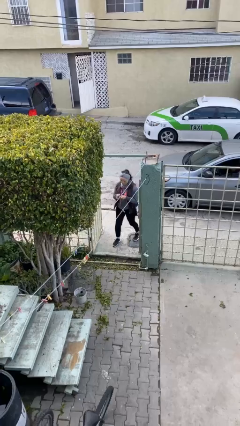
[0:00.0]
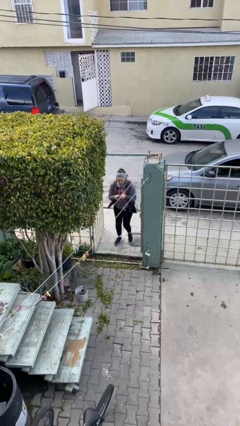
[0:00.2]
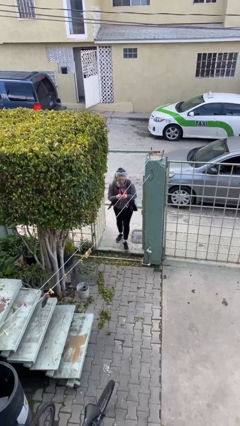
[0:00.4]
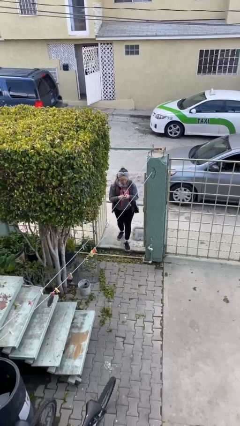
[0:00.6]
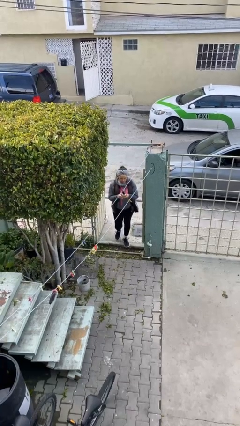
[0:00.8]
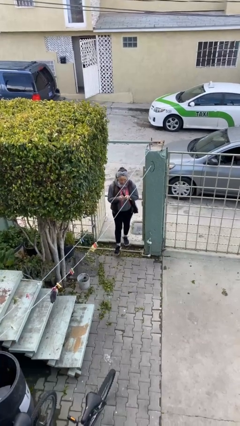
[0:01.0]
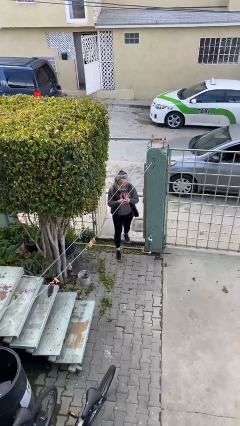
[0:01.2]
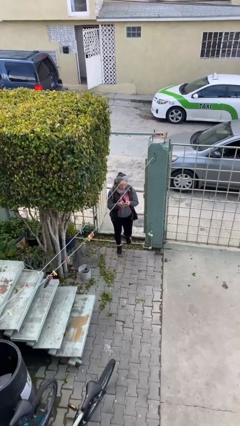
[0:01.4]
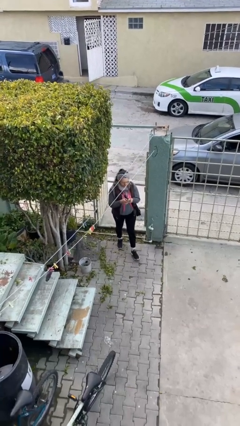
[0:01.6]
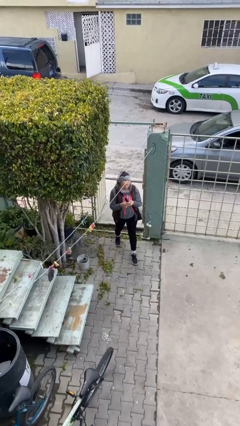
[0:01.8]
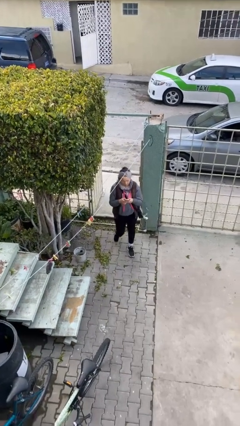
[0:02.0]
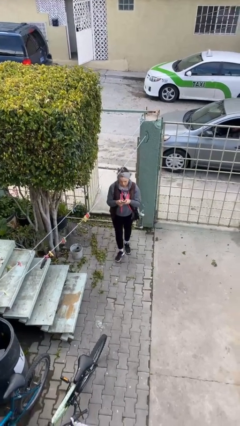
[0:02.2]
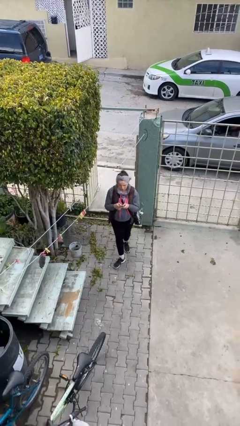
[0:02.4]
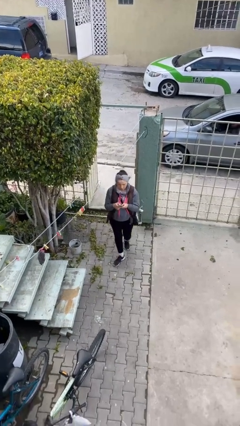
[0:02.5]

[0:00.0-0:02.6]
person enters scene through structure

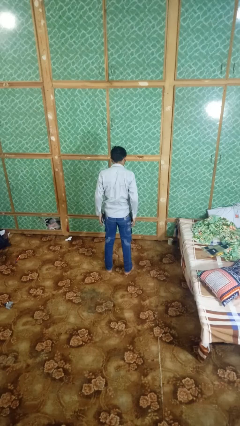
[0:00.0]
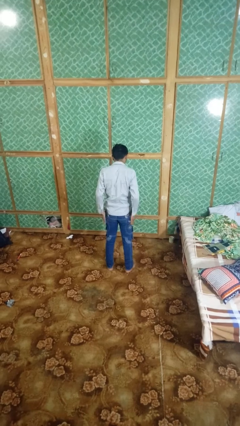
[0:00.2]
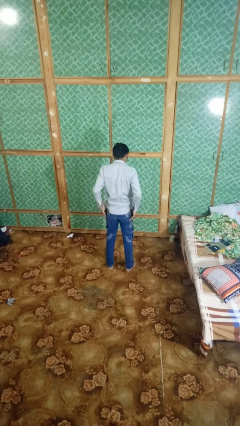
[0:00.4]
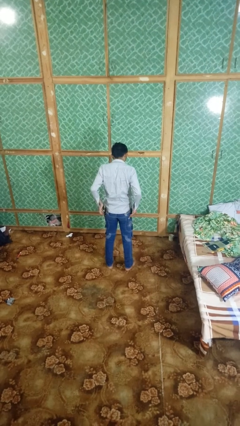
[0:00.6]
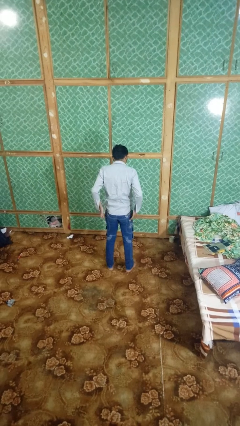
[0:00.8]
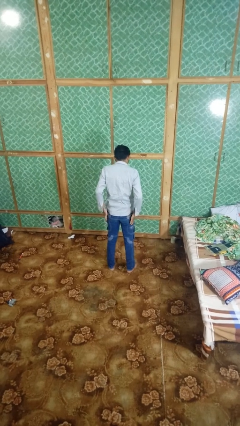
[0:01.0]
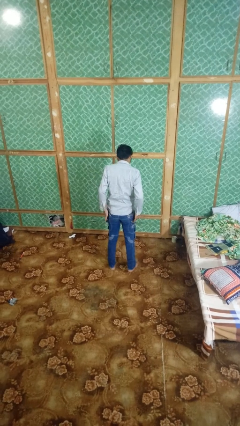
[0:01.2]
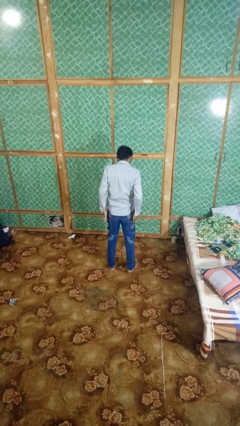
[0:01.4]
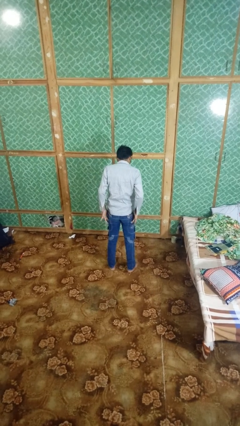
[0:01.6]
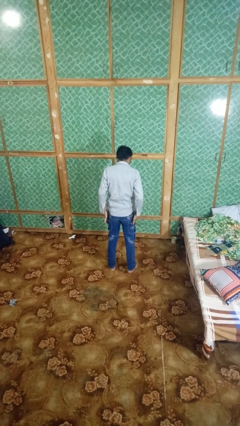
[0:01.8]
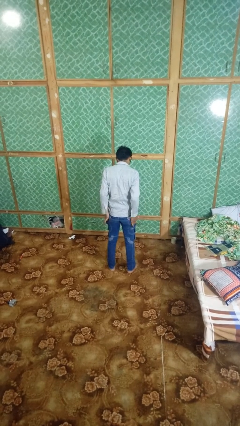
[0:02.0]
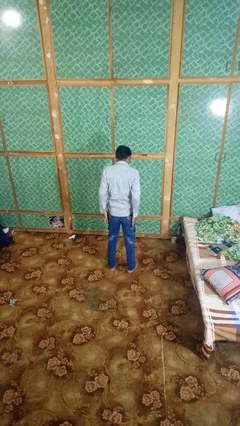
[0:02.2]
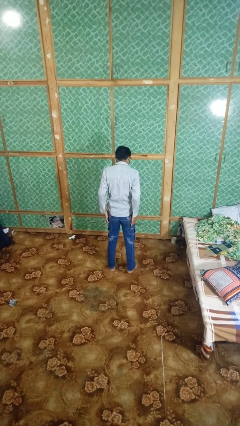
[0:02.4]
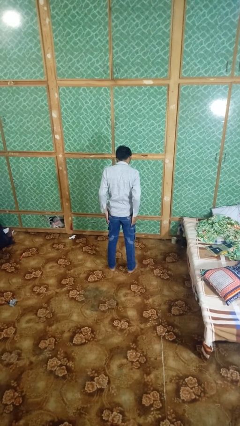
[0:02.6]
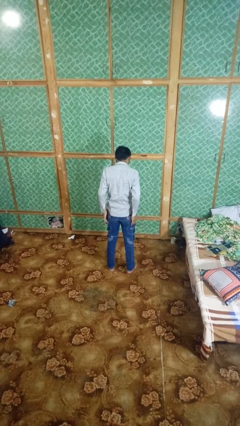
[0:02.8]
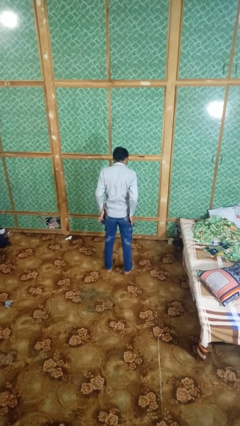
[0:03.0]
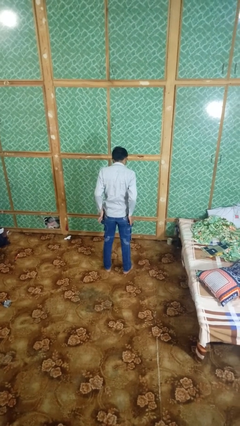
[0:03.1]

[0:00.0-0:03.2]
person puts hands in back pockets

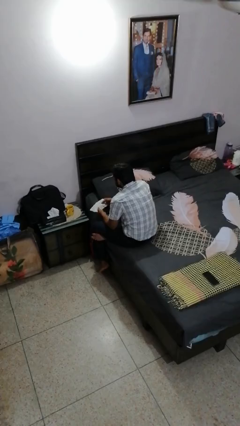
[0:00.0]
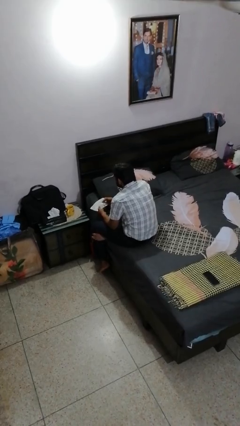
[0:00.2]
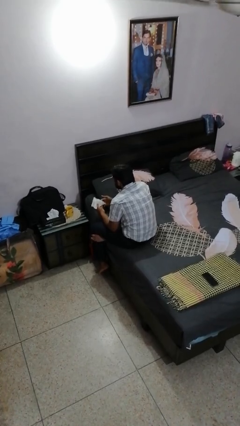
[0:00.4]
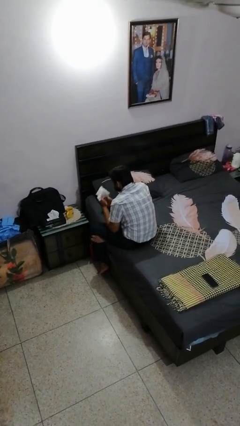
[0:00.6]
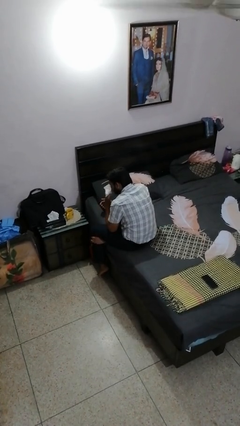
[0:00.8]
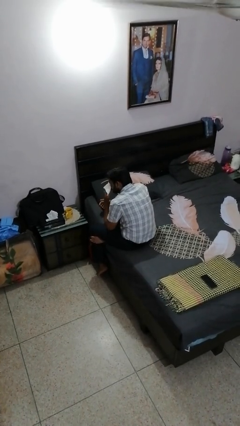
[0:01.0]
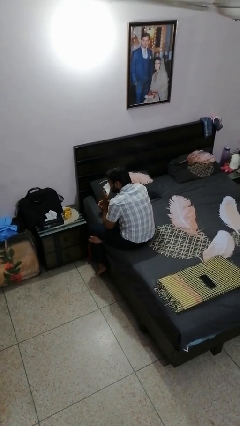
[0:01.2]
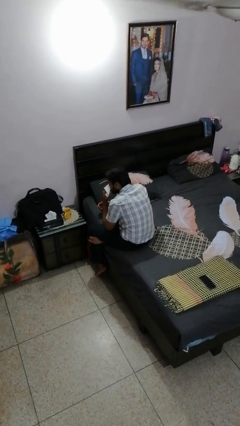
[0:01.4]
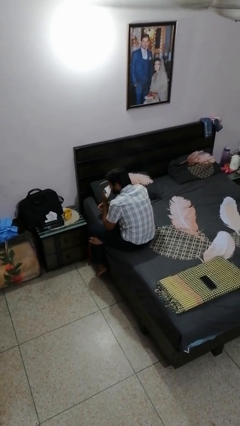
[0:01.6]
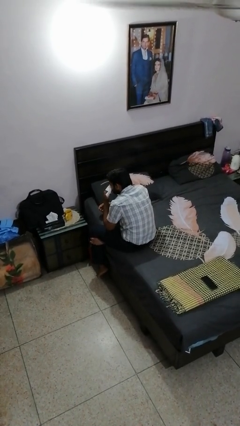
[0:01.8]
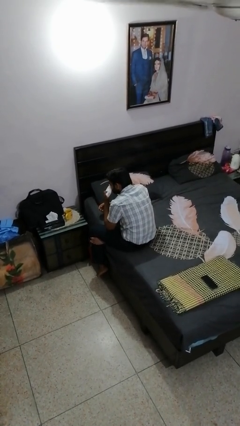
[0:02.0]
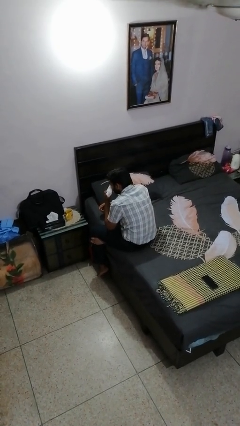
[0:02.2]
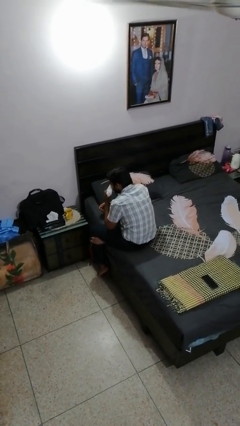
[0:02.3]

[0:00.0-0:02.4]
person blows nose

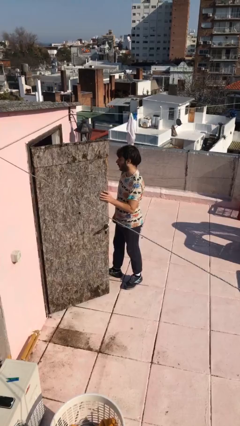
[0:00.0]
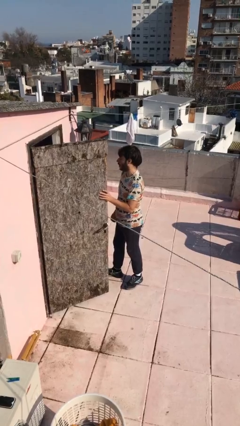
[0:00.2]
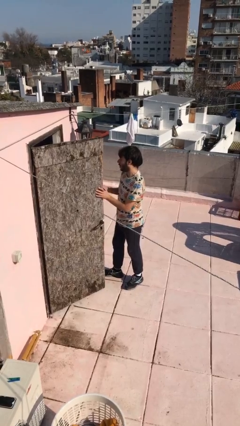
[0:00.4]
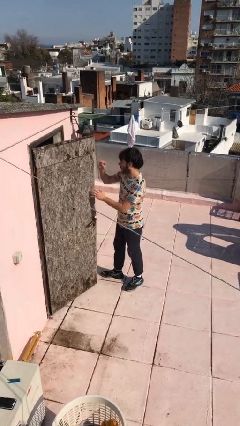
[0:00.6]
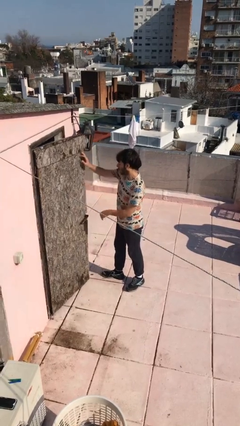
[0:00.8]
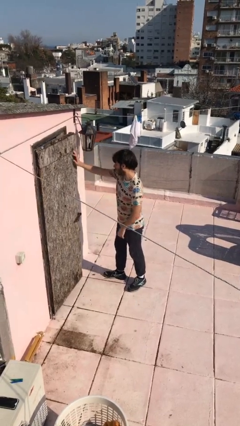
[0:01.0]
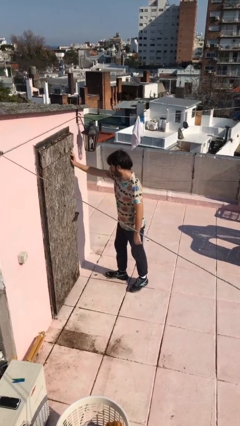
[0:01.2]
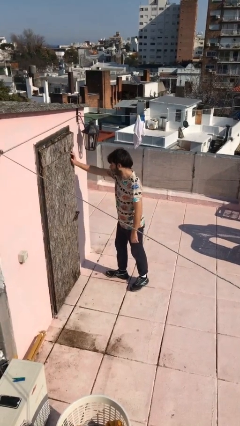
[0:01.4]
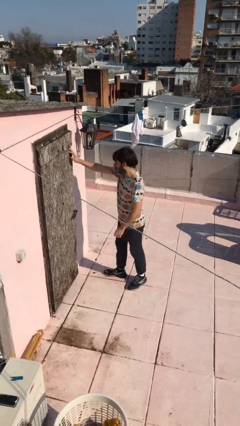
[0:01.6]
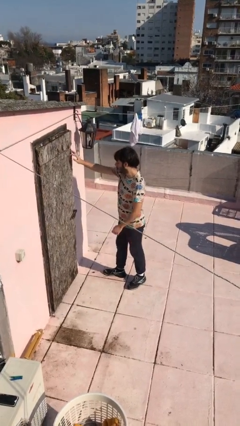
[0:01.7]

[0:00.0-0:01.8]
person closes facility door

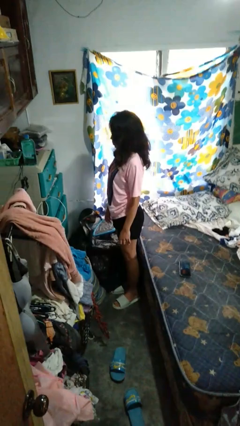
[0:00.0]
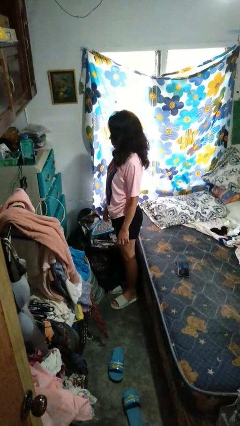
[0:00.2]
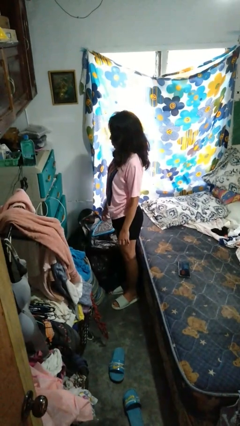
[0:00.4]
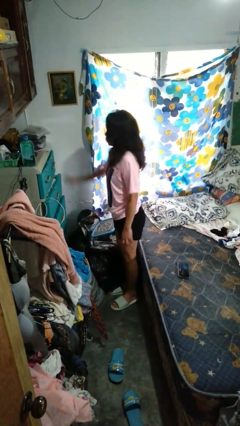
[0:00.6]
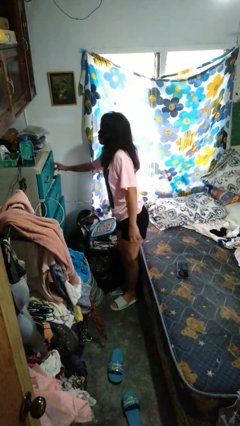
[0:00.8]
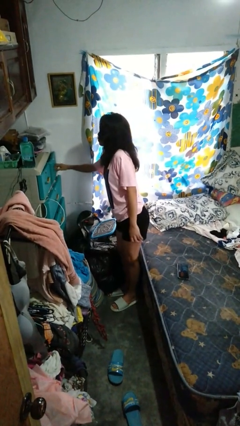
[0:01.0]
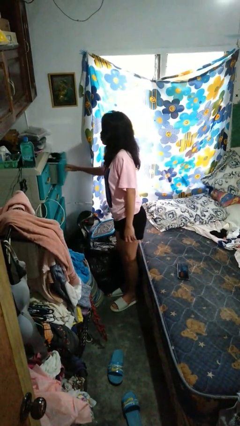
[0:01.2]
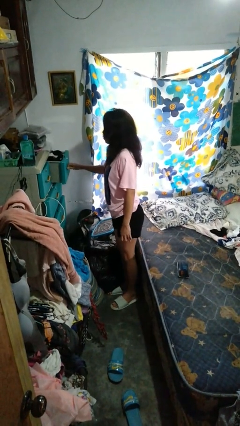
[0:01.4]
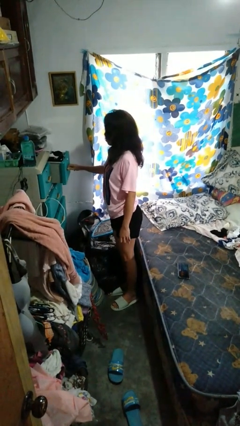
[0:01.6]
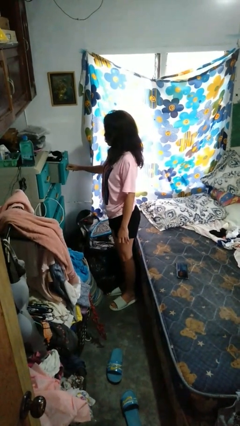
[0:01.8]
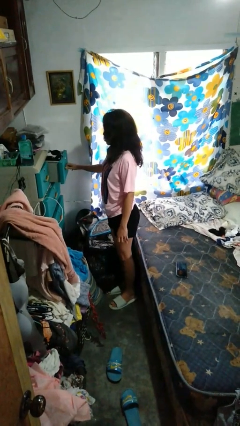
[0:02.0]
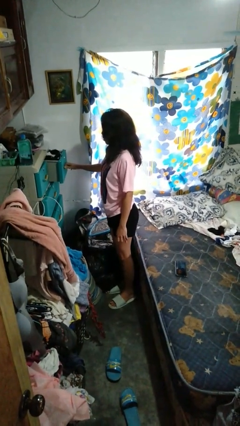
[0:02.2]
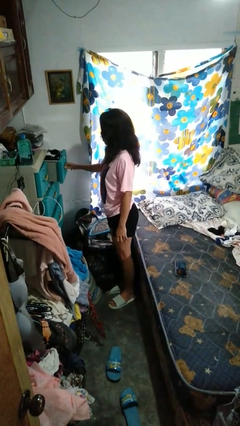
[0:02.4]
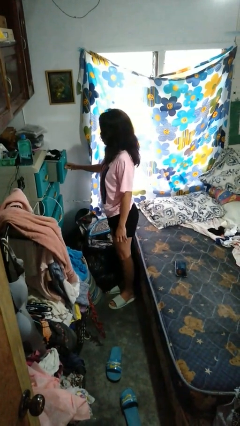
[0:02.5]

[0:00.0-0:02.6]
person opens dresser drawer

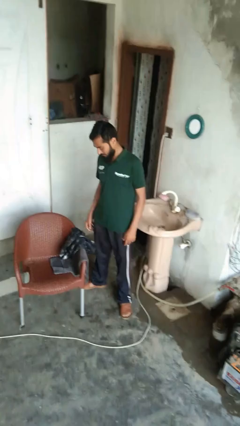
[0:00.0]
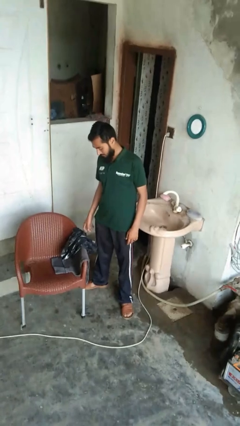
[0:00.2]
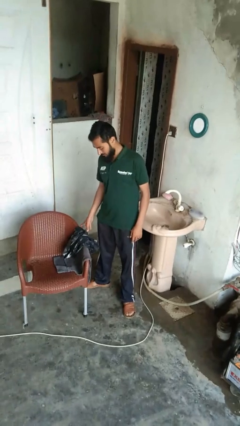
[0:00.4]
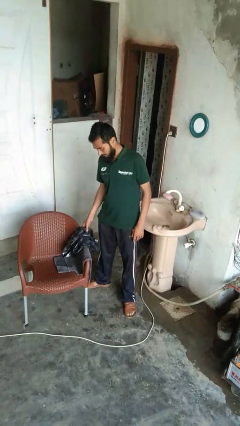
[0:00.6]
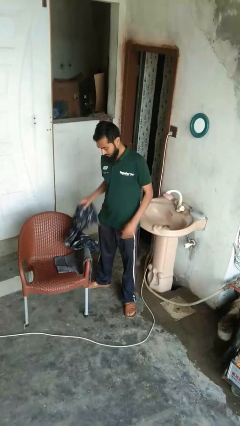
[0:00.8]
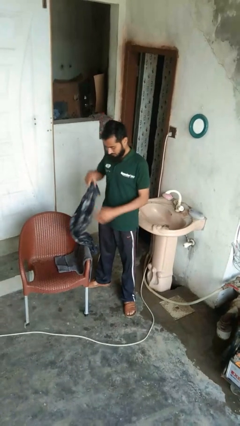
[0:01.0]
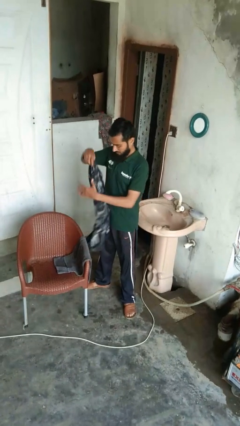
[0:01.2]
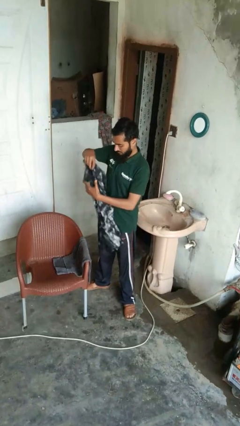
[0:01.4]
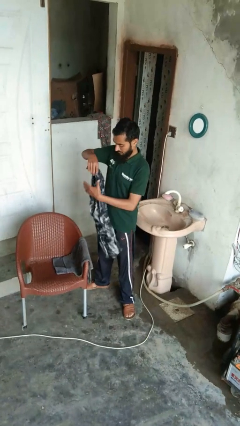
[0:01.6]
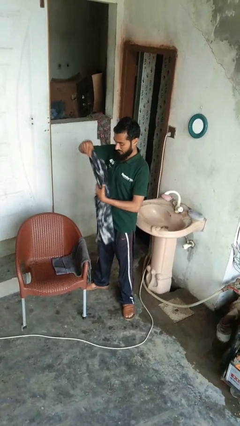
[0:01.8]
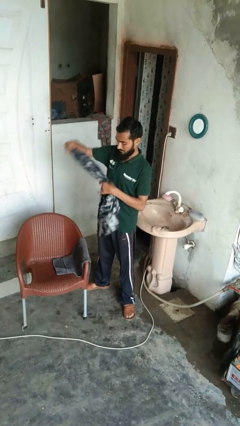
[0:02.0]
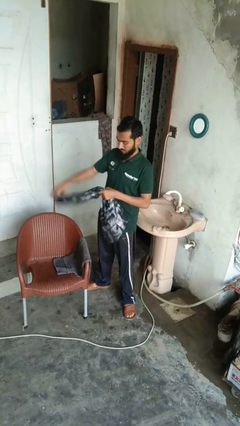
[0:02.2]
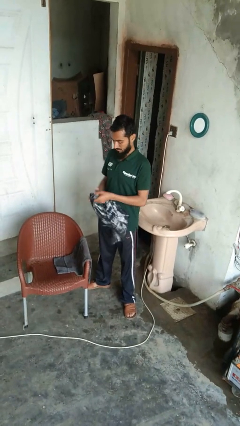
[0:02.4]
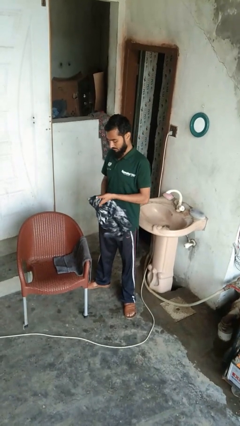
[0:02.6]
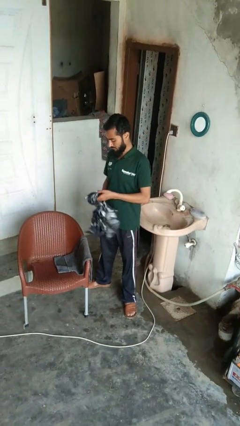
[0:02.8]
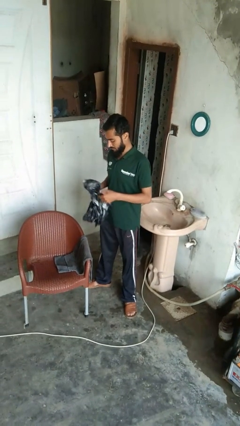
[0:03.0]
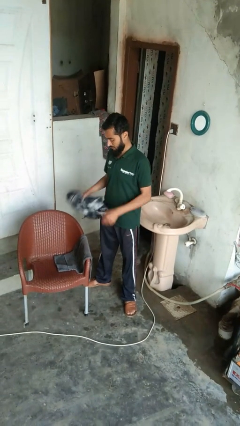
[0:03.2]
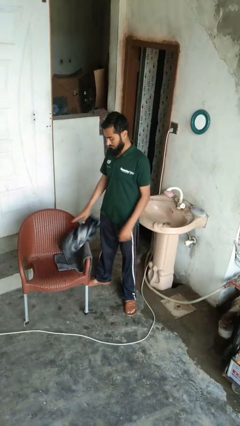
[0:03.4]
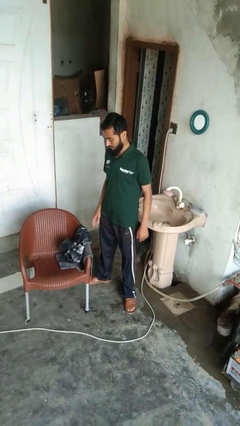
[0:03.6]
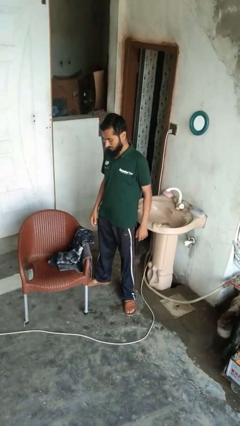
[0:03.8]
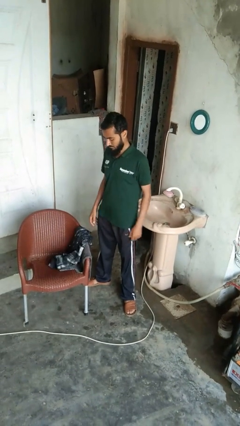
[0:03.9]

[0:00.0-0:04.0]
person folds shirt

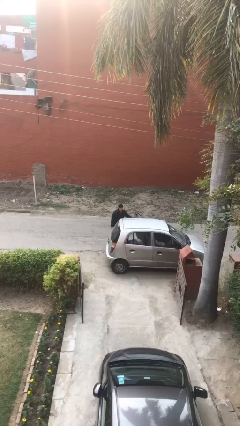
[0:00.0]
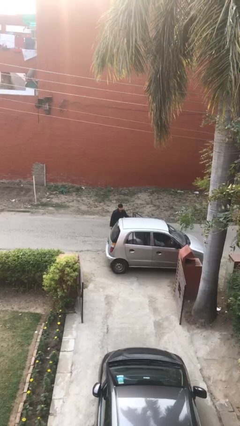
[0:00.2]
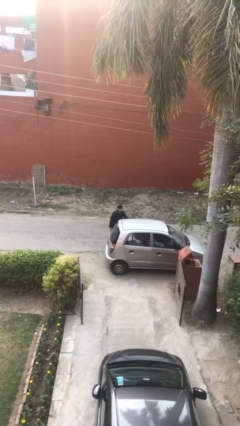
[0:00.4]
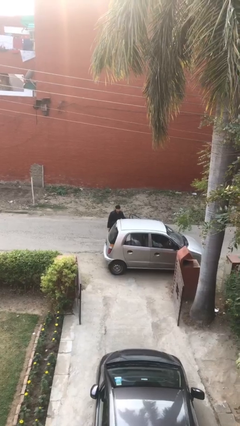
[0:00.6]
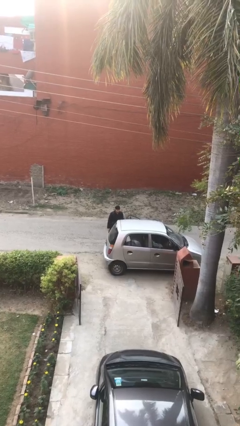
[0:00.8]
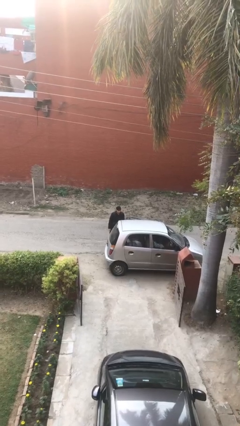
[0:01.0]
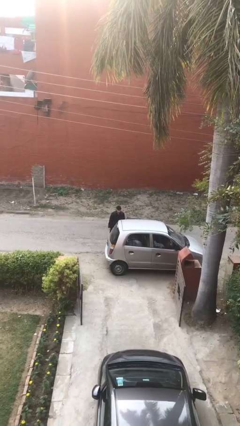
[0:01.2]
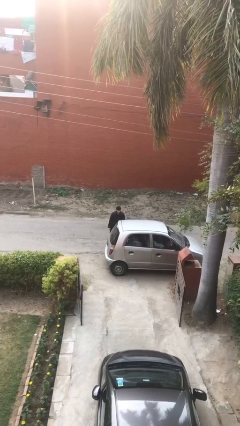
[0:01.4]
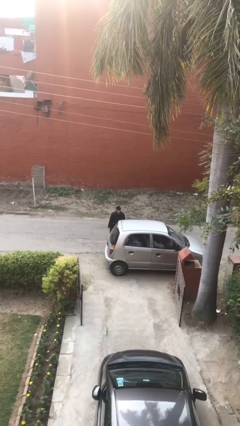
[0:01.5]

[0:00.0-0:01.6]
person closes car door
